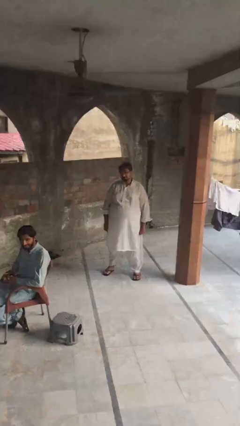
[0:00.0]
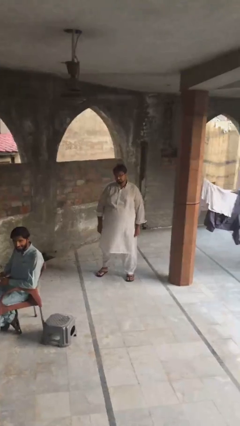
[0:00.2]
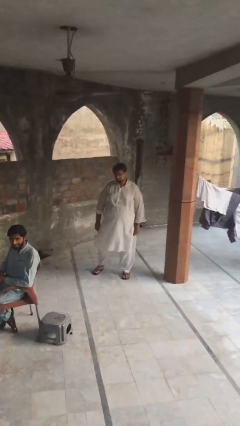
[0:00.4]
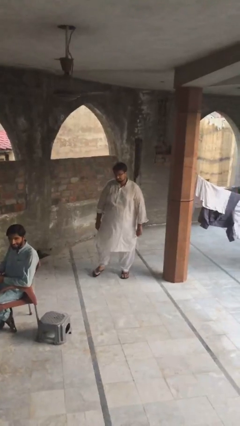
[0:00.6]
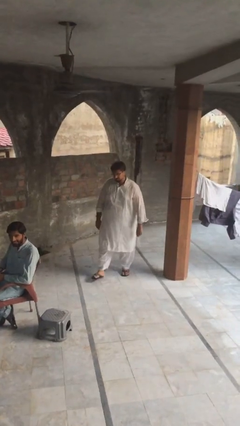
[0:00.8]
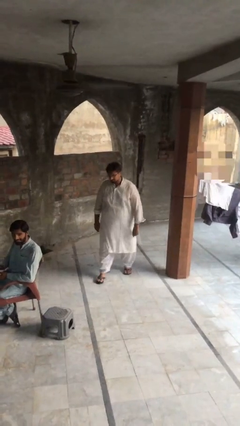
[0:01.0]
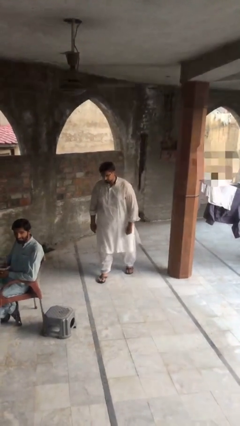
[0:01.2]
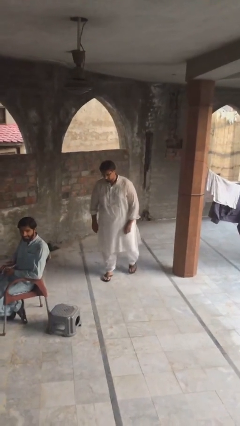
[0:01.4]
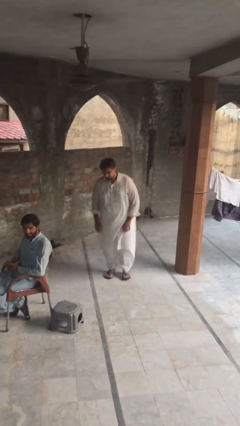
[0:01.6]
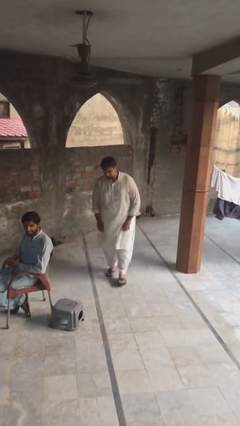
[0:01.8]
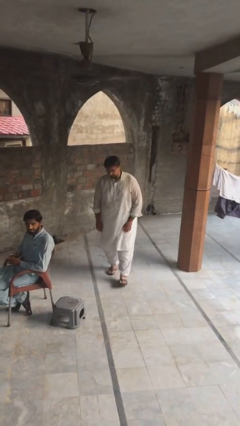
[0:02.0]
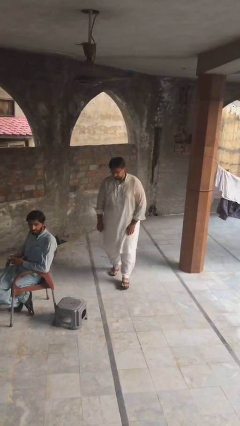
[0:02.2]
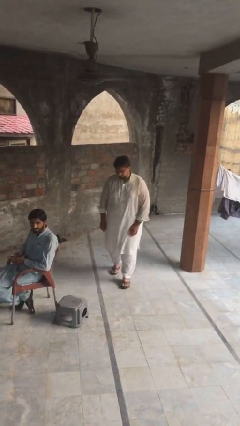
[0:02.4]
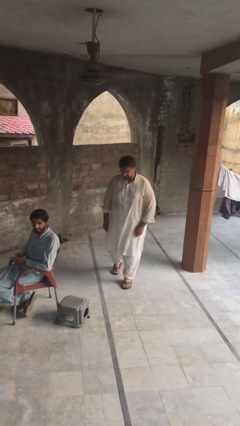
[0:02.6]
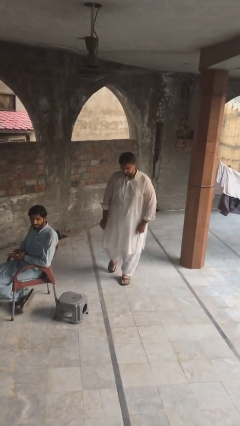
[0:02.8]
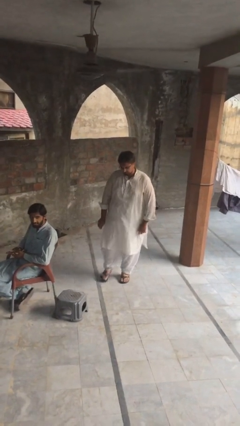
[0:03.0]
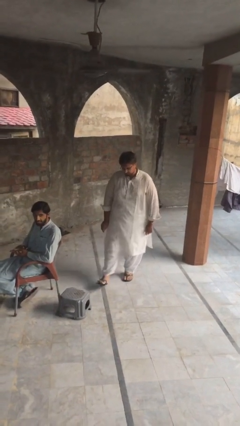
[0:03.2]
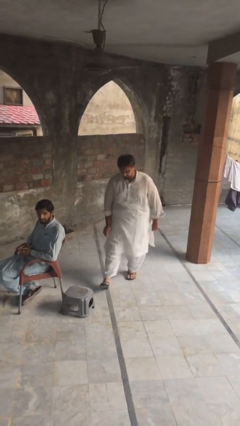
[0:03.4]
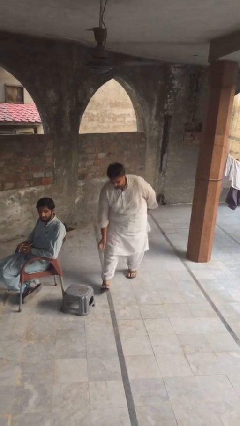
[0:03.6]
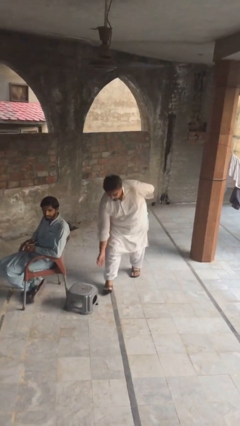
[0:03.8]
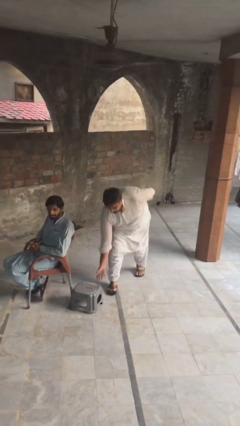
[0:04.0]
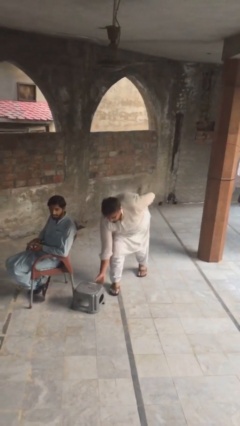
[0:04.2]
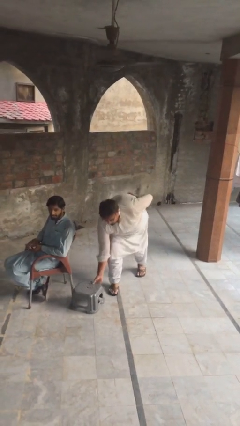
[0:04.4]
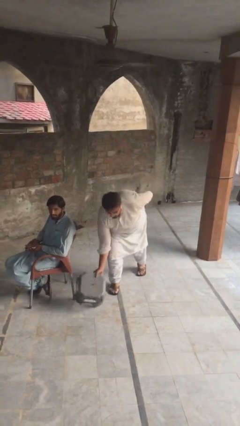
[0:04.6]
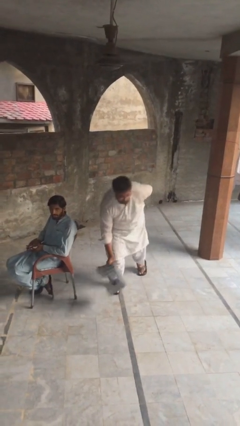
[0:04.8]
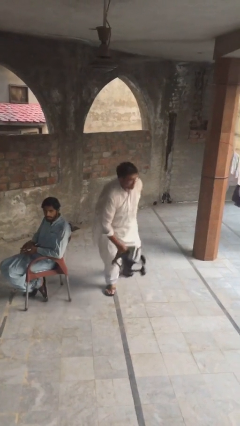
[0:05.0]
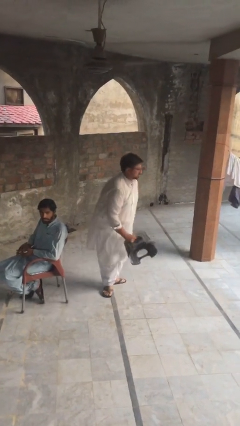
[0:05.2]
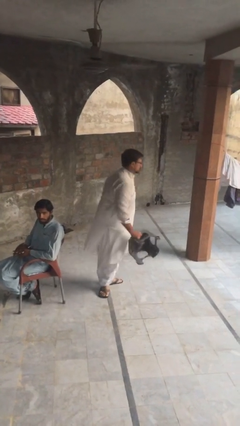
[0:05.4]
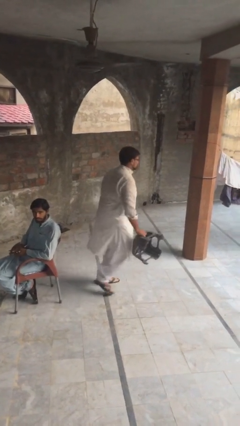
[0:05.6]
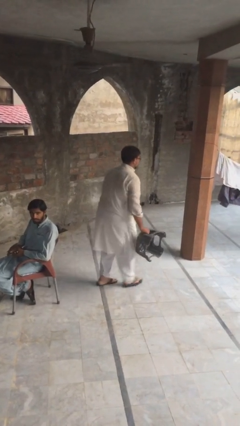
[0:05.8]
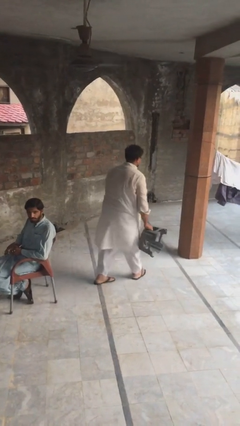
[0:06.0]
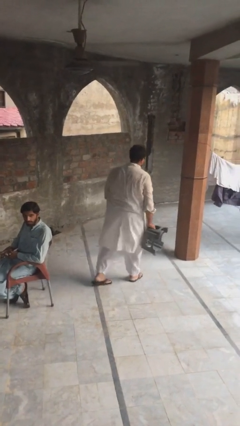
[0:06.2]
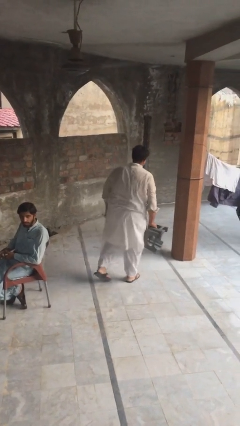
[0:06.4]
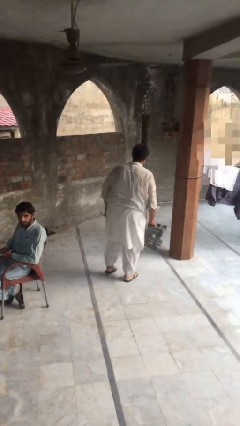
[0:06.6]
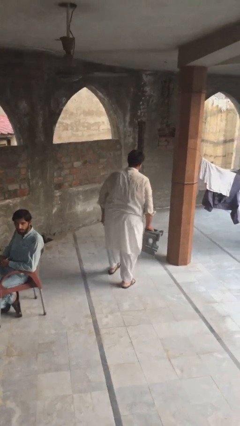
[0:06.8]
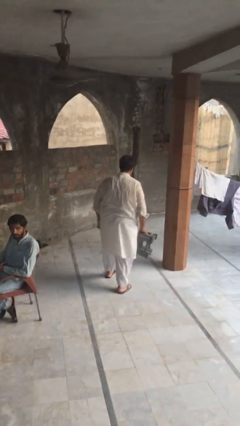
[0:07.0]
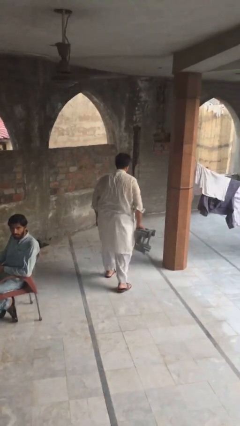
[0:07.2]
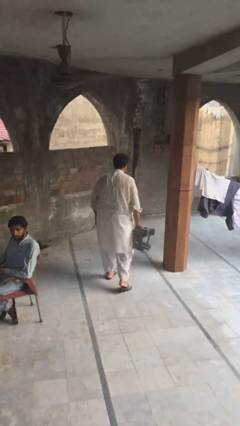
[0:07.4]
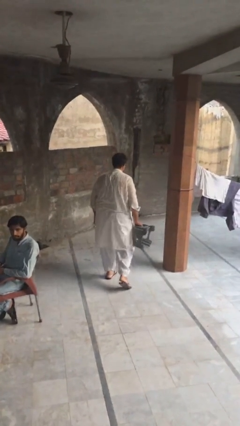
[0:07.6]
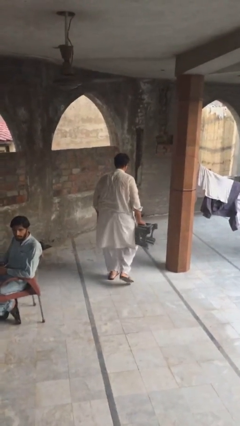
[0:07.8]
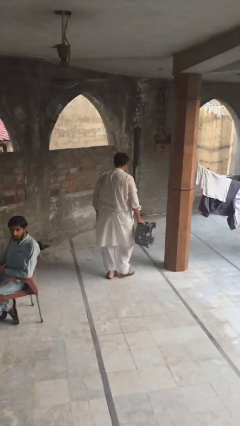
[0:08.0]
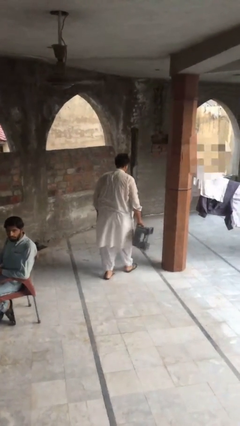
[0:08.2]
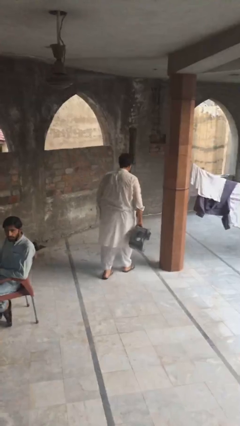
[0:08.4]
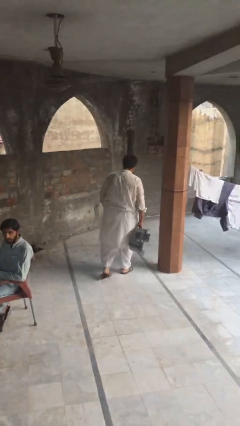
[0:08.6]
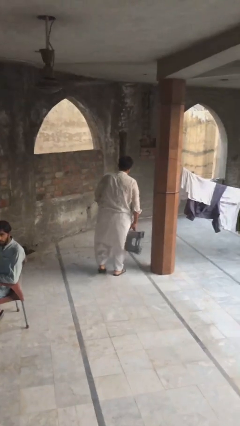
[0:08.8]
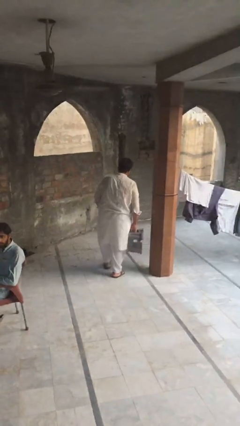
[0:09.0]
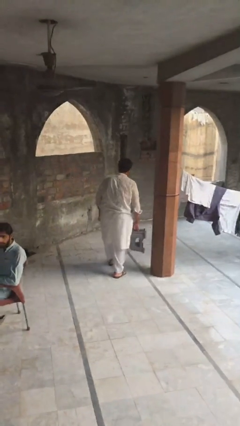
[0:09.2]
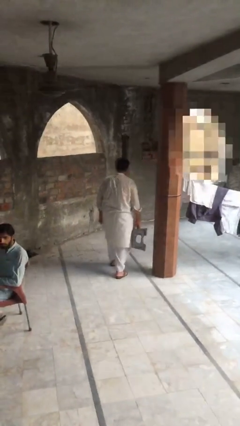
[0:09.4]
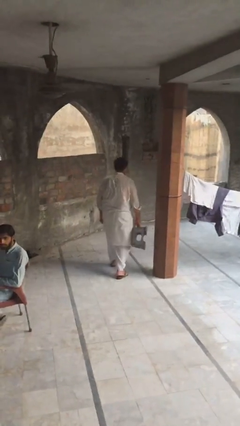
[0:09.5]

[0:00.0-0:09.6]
person steals object from person

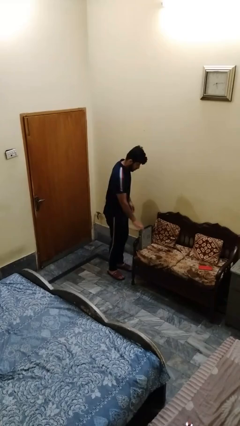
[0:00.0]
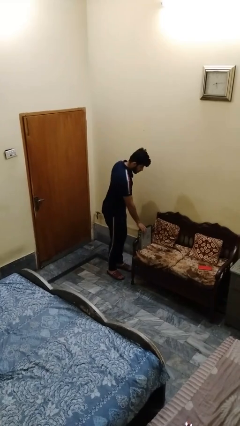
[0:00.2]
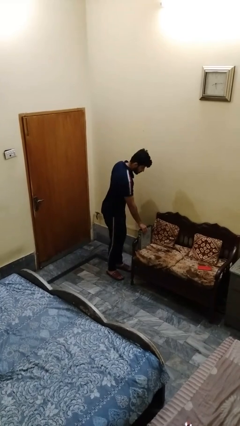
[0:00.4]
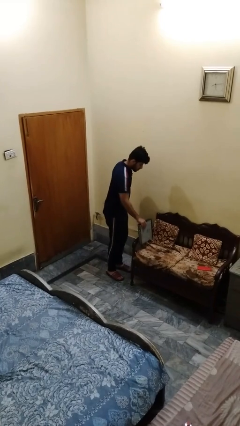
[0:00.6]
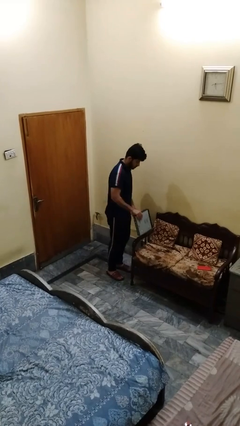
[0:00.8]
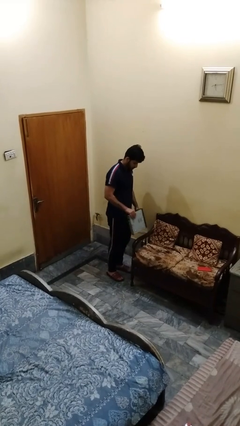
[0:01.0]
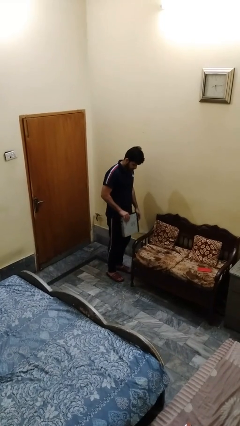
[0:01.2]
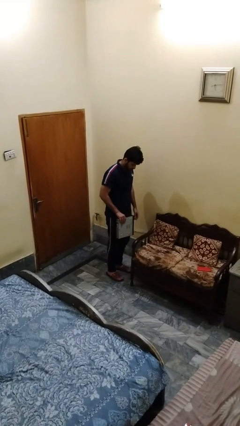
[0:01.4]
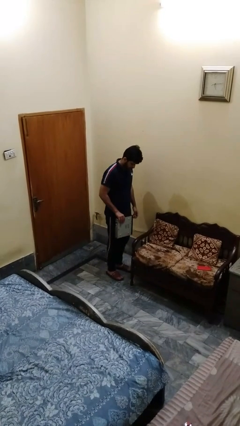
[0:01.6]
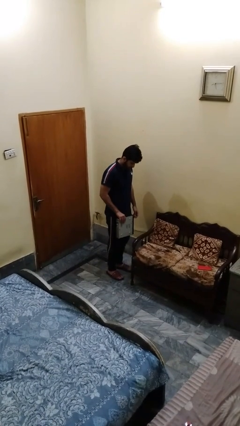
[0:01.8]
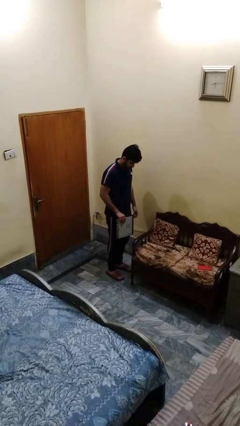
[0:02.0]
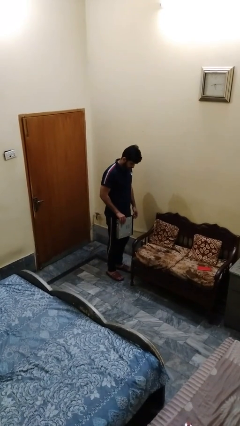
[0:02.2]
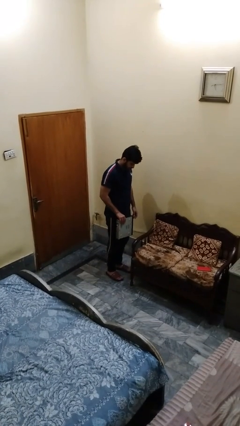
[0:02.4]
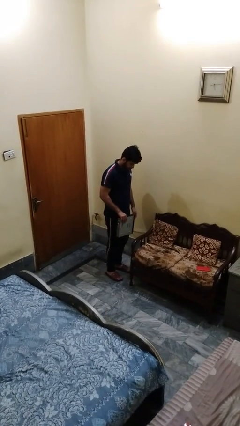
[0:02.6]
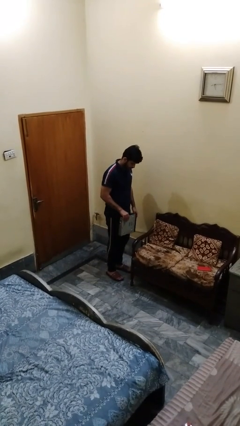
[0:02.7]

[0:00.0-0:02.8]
person picks up object from couch

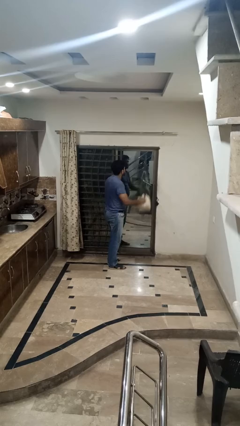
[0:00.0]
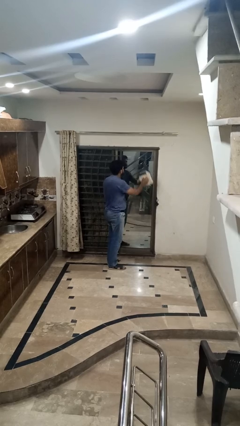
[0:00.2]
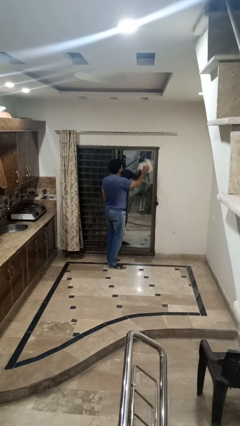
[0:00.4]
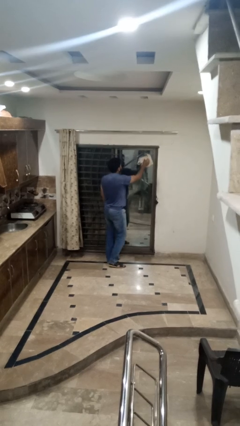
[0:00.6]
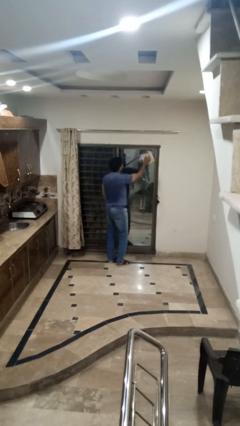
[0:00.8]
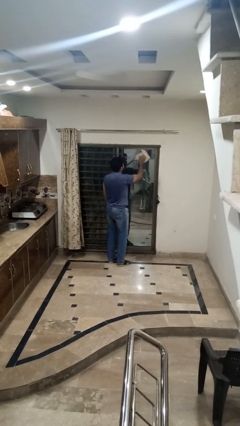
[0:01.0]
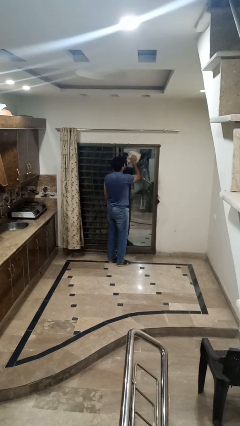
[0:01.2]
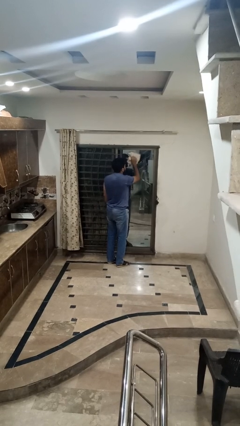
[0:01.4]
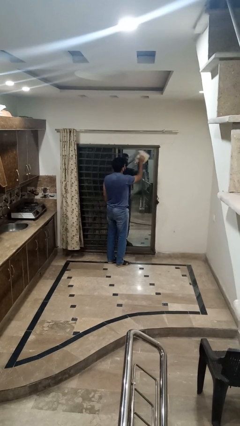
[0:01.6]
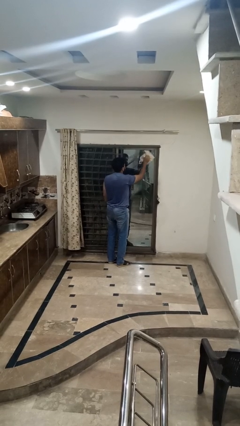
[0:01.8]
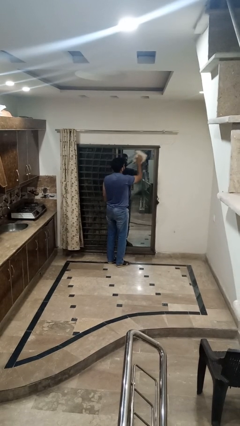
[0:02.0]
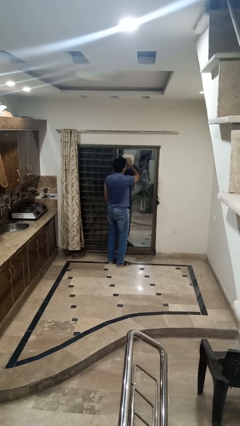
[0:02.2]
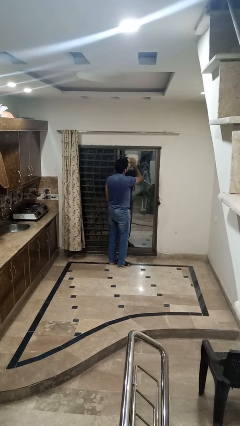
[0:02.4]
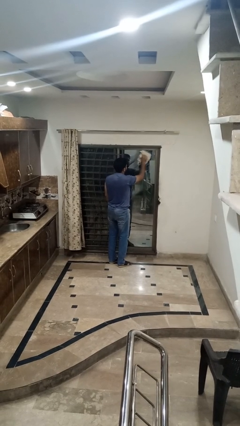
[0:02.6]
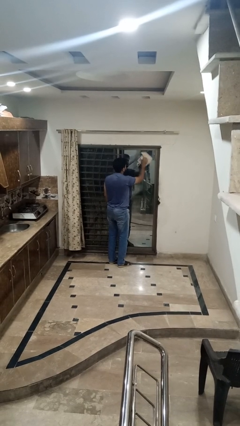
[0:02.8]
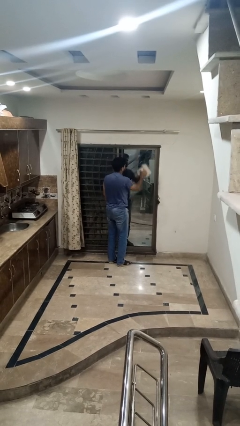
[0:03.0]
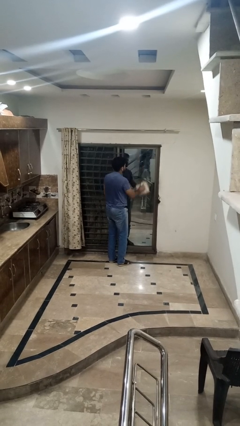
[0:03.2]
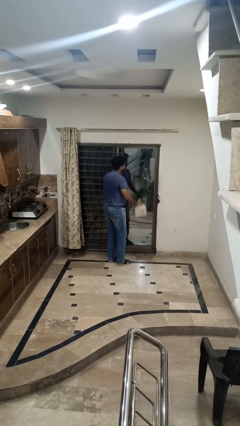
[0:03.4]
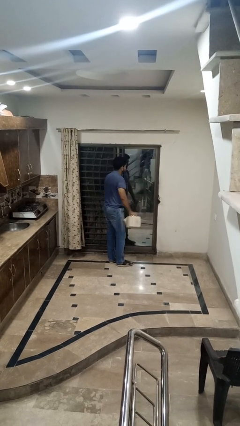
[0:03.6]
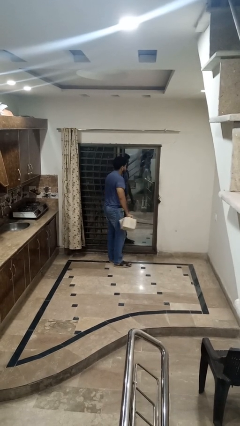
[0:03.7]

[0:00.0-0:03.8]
person washes window

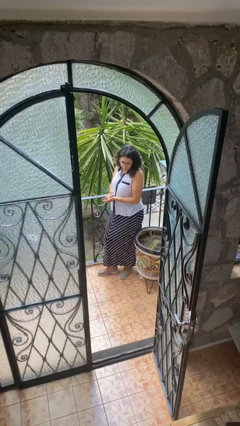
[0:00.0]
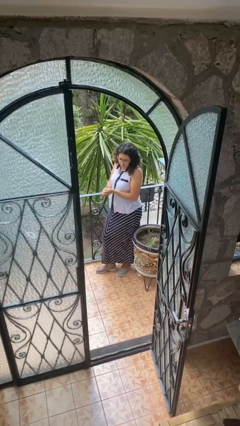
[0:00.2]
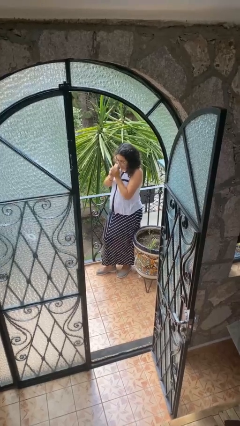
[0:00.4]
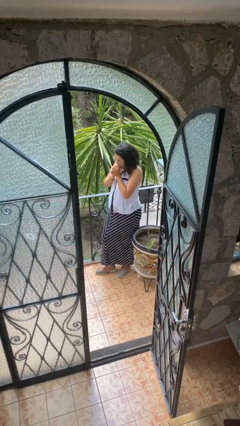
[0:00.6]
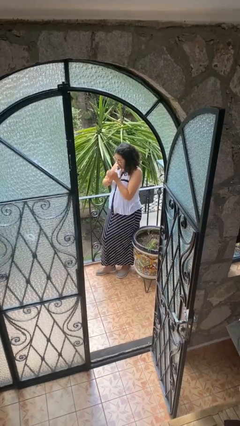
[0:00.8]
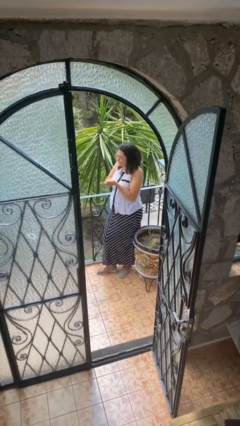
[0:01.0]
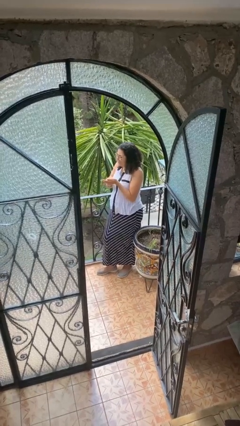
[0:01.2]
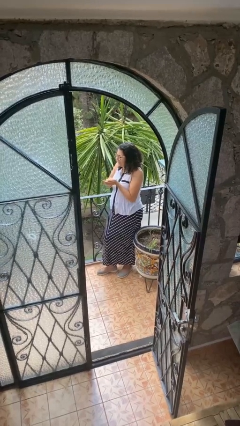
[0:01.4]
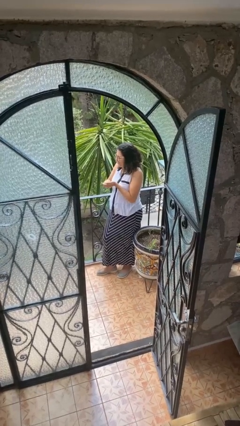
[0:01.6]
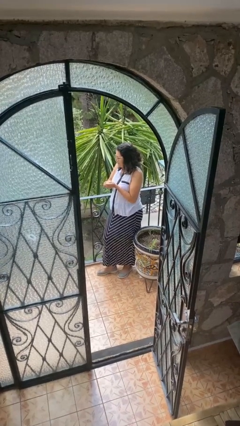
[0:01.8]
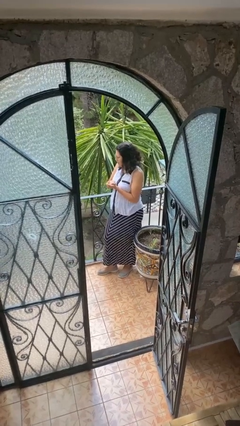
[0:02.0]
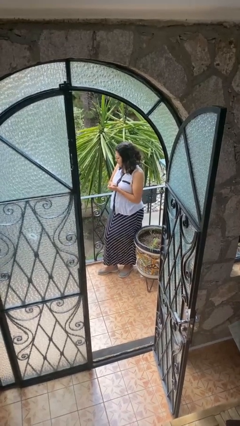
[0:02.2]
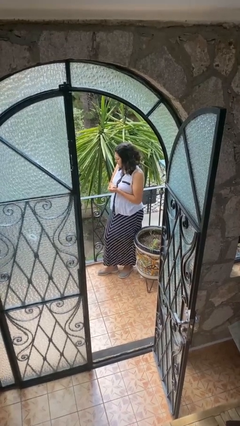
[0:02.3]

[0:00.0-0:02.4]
person blows into hands
